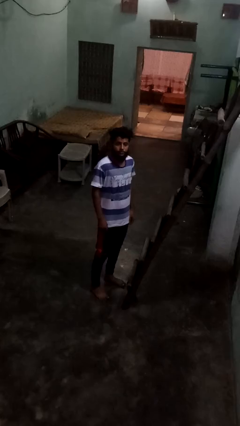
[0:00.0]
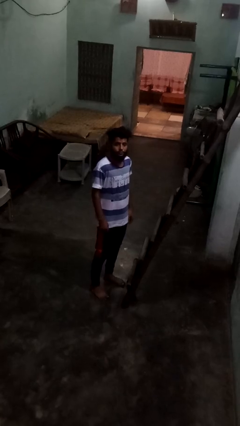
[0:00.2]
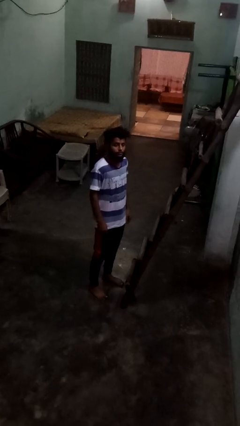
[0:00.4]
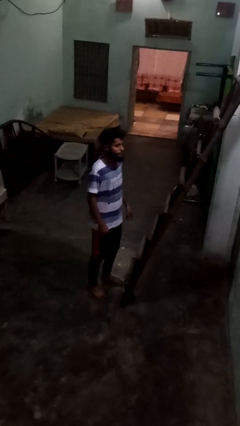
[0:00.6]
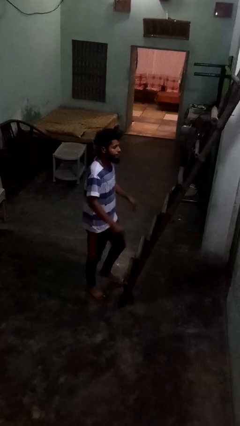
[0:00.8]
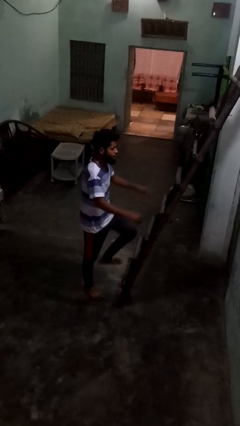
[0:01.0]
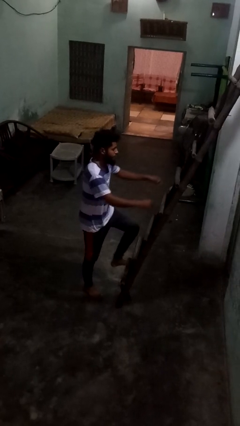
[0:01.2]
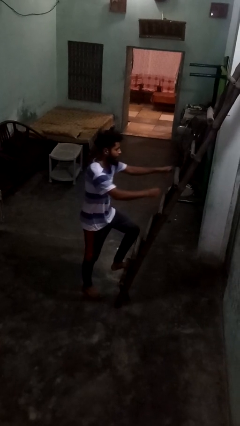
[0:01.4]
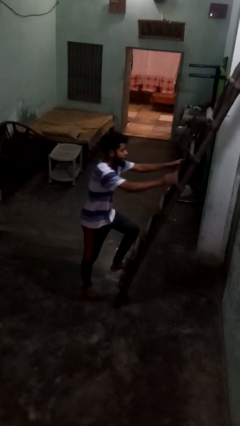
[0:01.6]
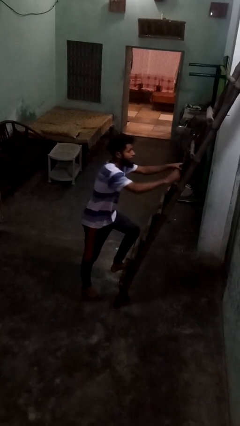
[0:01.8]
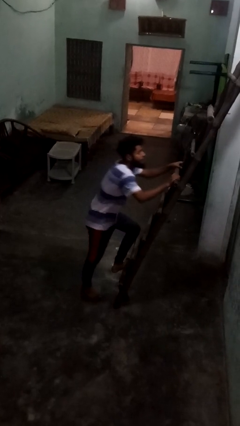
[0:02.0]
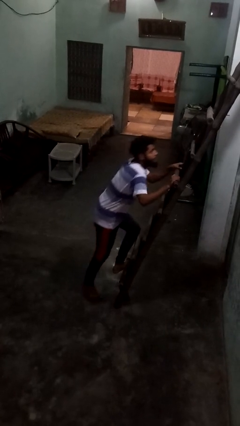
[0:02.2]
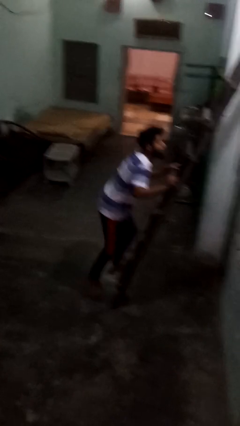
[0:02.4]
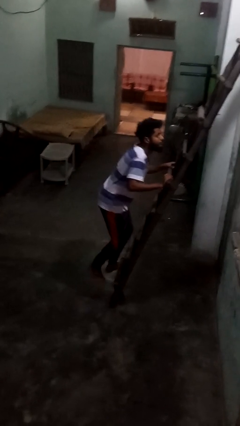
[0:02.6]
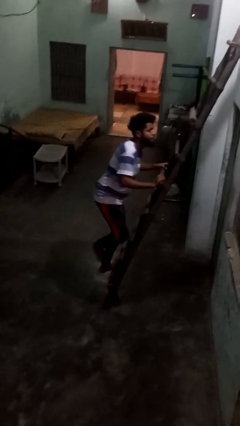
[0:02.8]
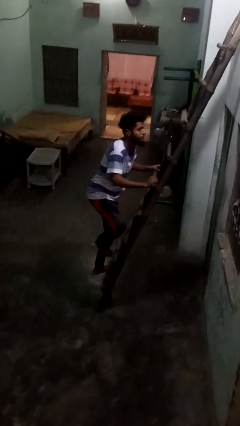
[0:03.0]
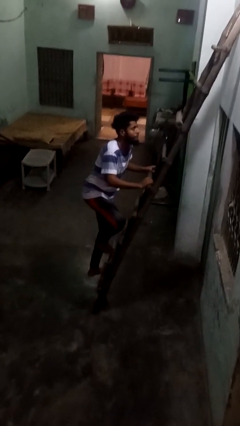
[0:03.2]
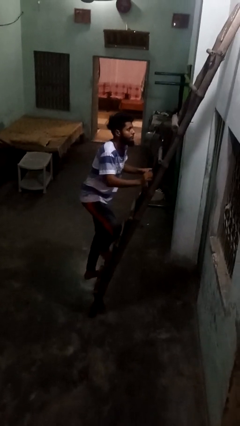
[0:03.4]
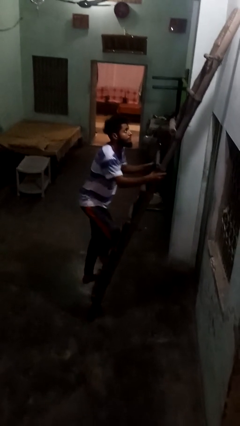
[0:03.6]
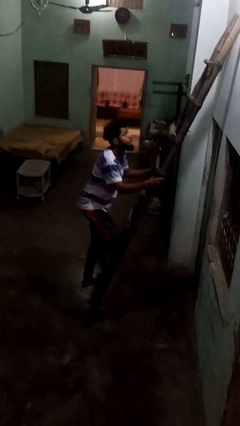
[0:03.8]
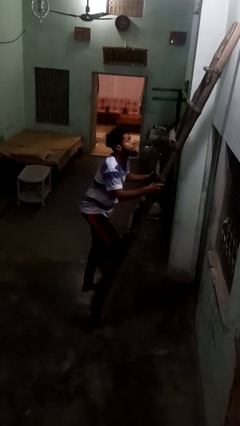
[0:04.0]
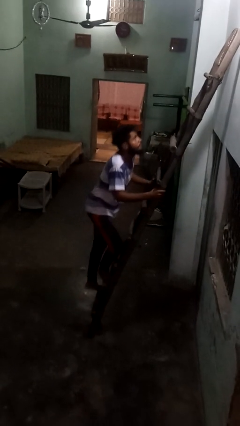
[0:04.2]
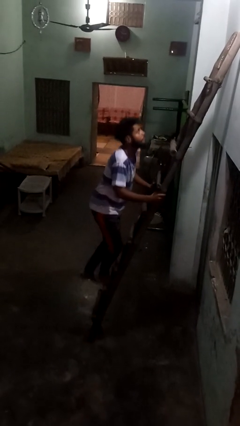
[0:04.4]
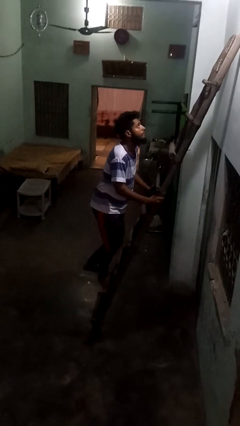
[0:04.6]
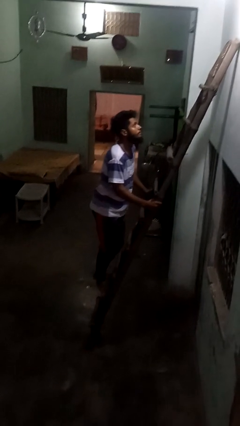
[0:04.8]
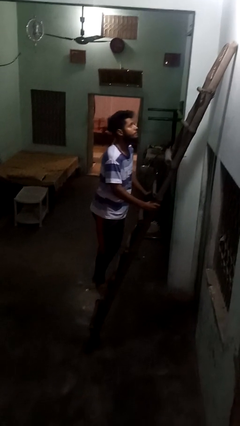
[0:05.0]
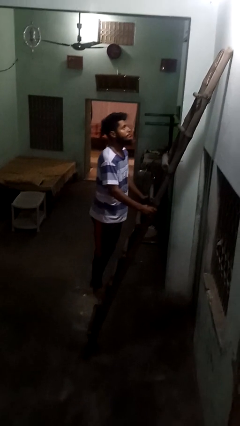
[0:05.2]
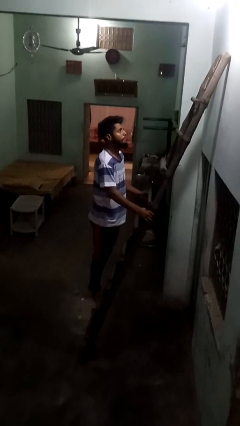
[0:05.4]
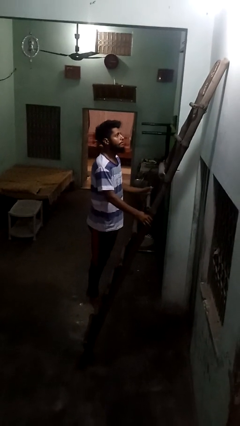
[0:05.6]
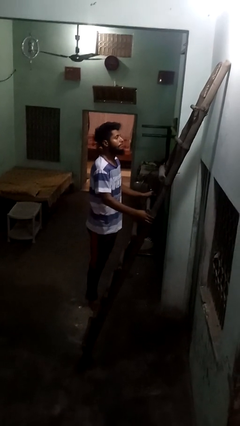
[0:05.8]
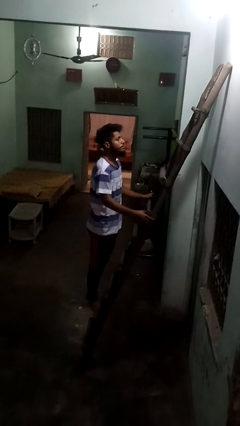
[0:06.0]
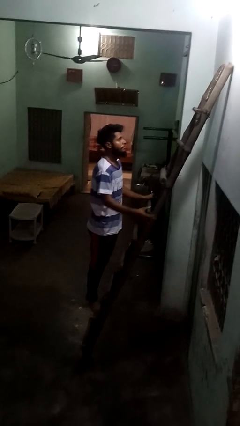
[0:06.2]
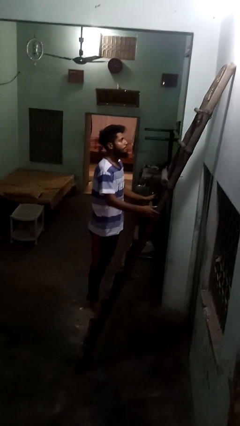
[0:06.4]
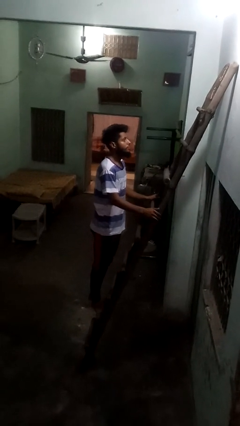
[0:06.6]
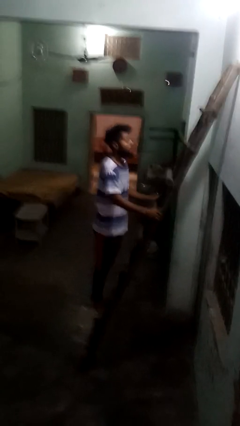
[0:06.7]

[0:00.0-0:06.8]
person climbs up ladder

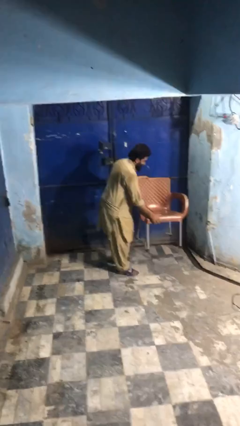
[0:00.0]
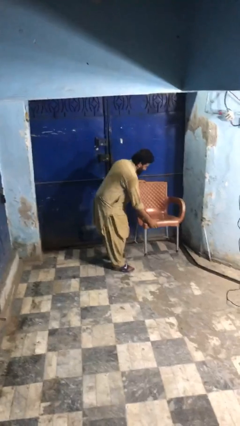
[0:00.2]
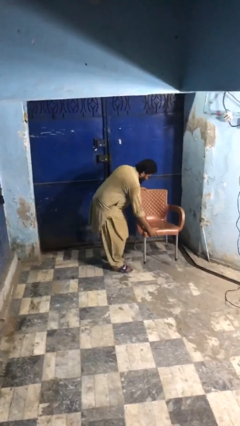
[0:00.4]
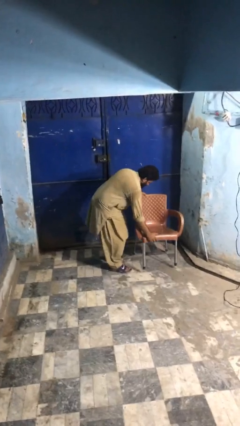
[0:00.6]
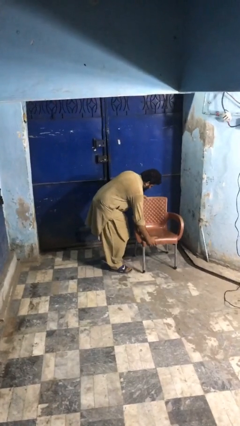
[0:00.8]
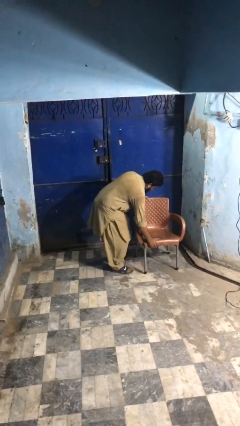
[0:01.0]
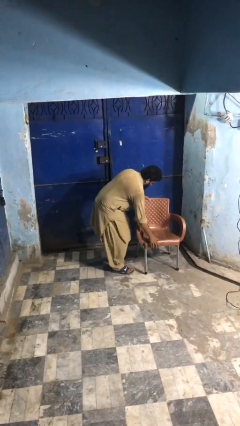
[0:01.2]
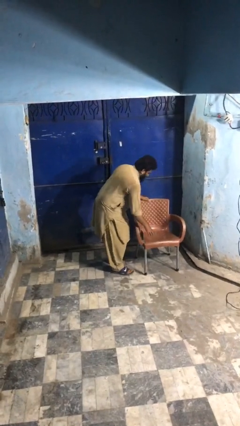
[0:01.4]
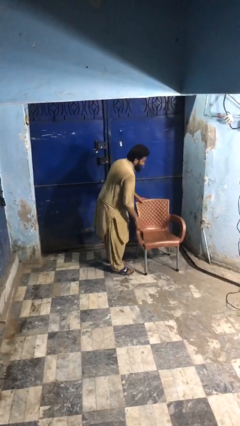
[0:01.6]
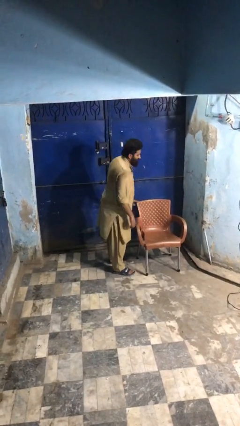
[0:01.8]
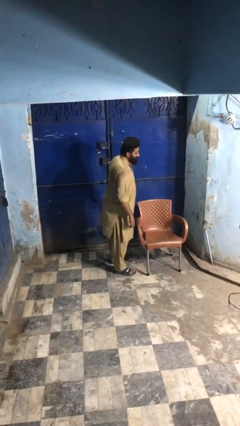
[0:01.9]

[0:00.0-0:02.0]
person puts down object on floor

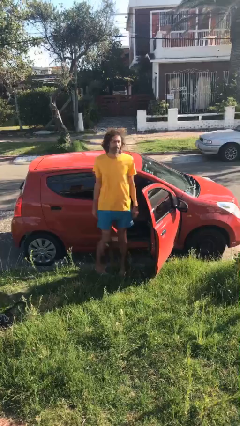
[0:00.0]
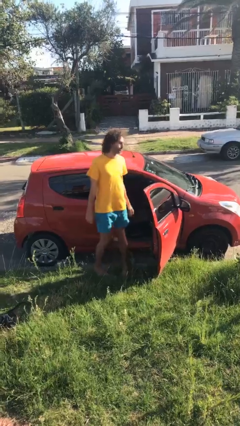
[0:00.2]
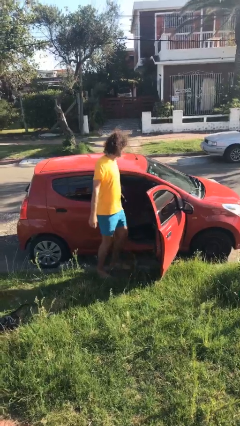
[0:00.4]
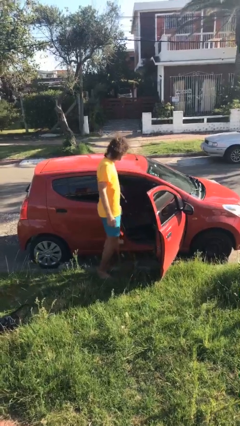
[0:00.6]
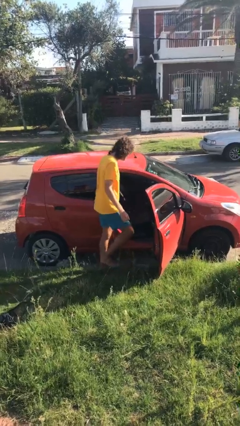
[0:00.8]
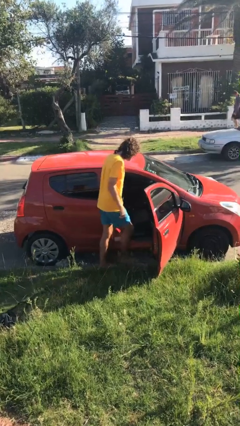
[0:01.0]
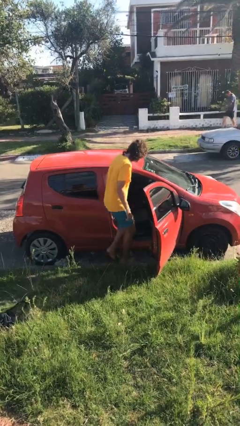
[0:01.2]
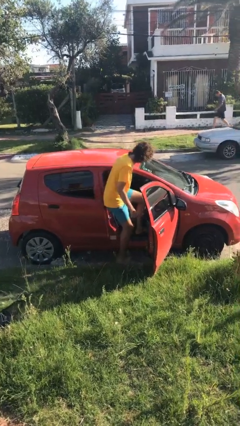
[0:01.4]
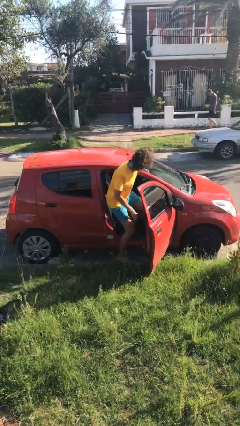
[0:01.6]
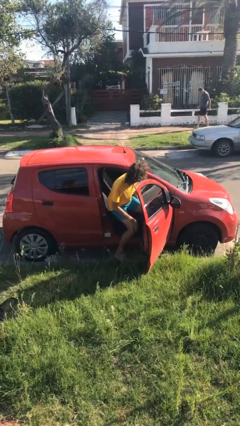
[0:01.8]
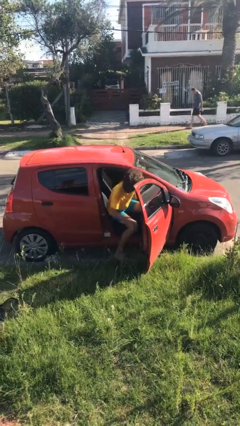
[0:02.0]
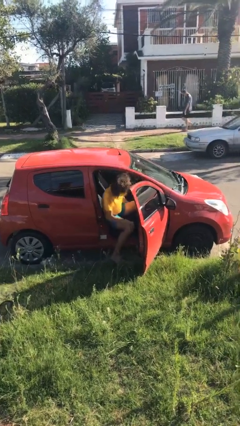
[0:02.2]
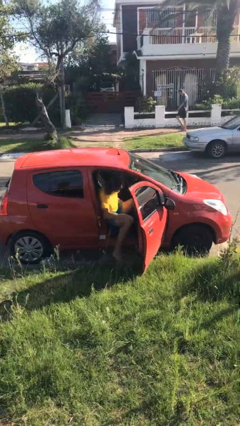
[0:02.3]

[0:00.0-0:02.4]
person enters car

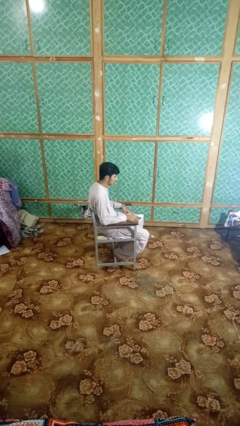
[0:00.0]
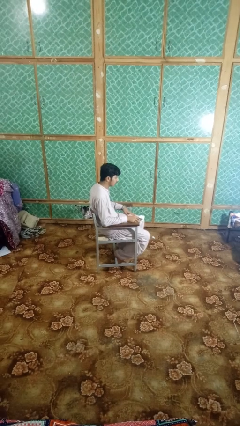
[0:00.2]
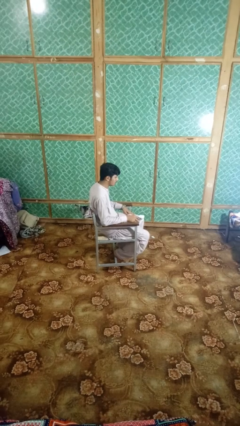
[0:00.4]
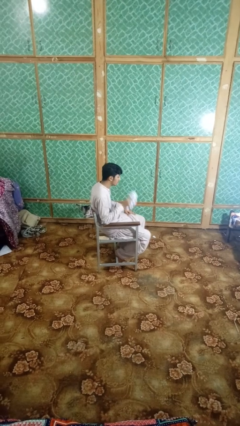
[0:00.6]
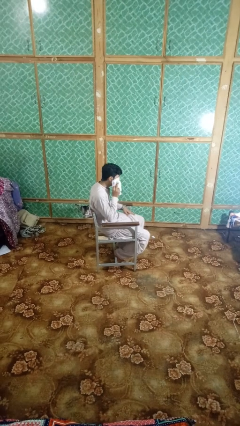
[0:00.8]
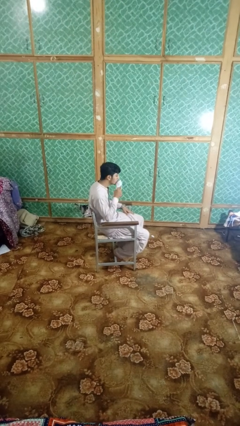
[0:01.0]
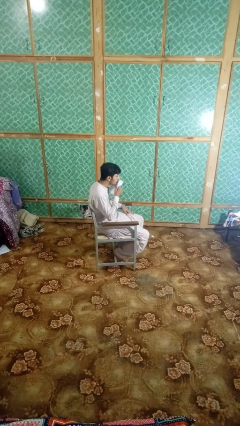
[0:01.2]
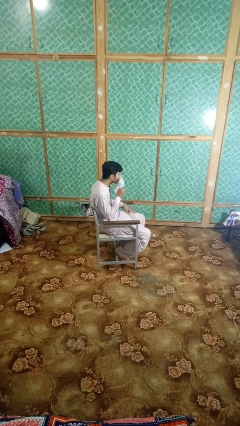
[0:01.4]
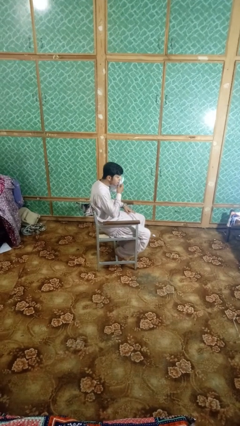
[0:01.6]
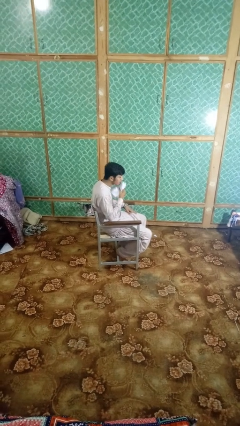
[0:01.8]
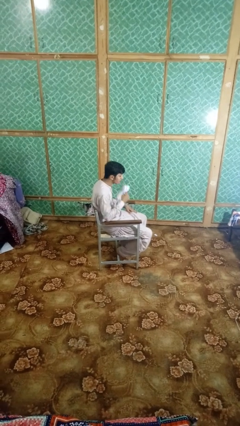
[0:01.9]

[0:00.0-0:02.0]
person wipes mouth with napkin

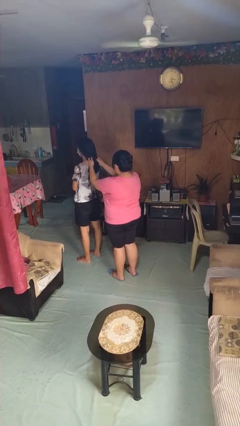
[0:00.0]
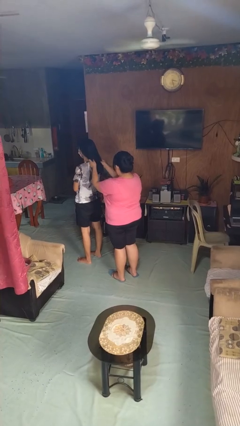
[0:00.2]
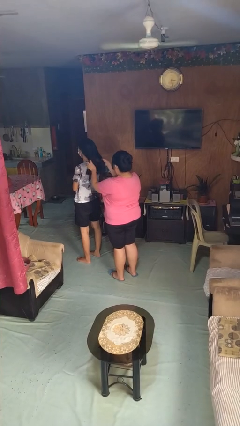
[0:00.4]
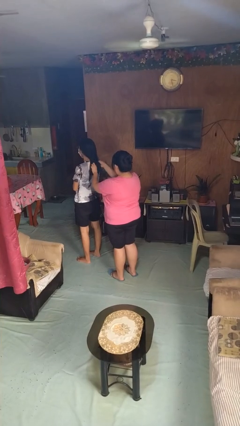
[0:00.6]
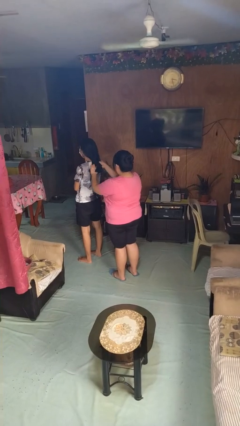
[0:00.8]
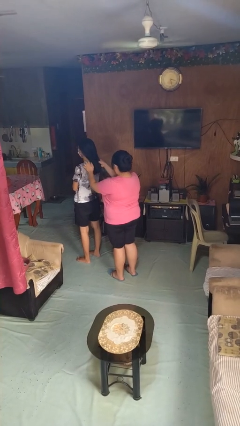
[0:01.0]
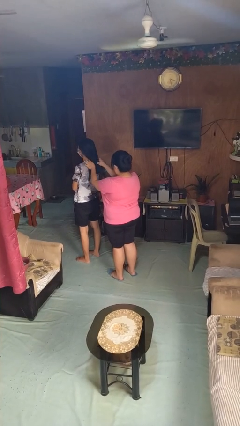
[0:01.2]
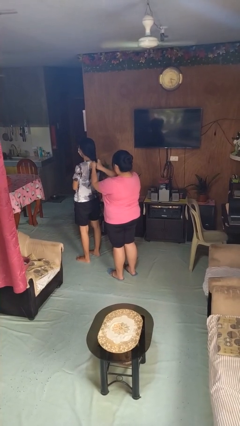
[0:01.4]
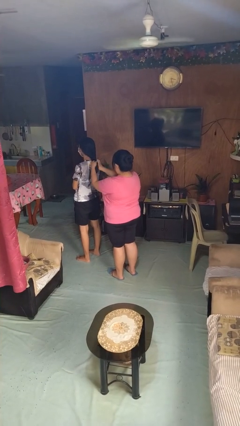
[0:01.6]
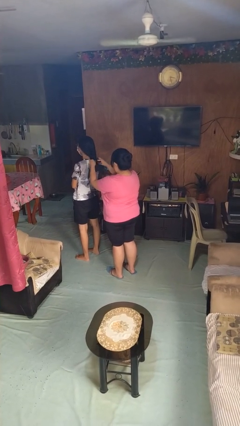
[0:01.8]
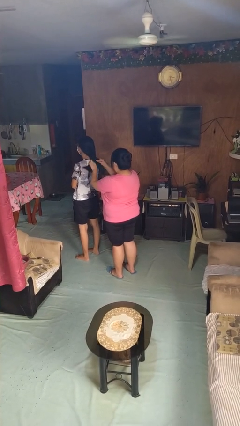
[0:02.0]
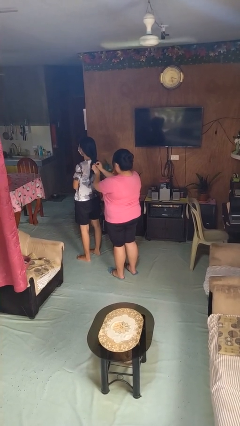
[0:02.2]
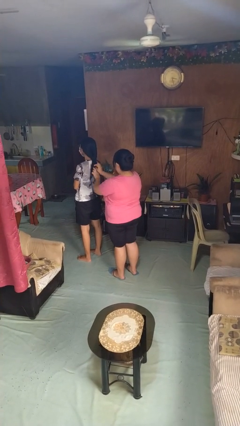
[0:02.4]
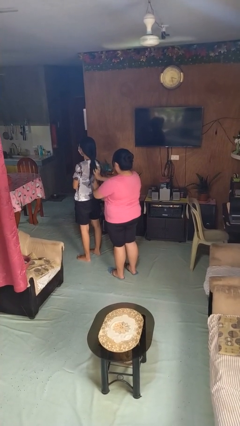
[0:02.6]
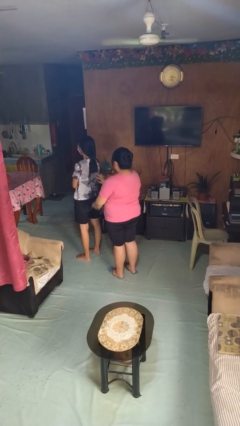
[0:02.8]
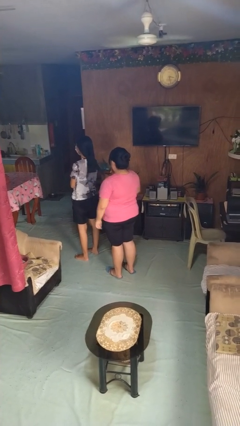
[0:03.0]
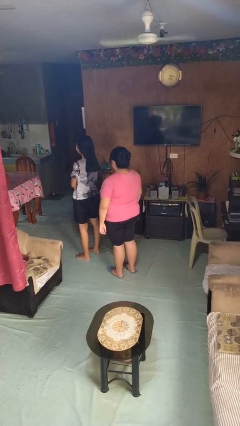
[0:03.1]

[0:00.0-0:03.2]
person braids hair of person

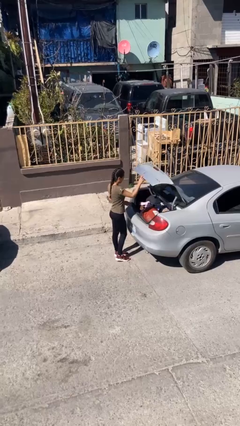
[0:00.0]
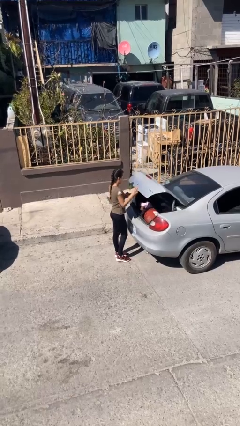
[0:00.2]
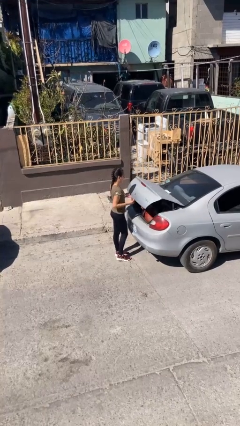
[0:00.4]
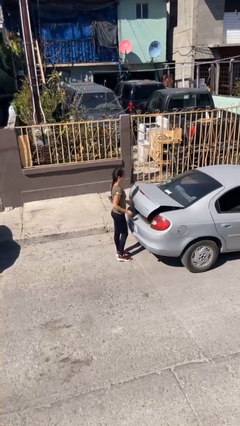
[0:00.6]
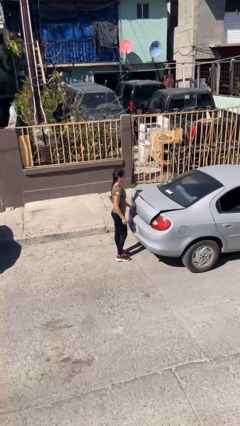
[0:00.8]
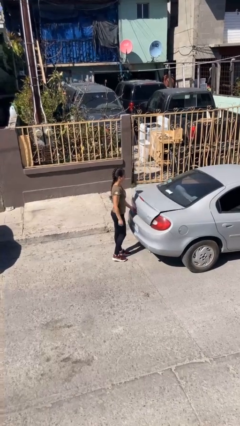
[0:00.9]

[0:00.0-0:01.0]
person closes car trunk
